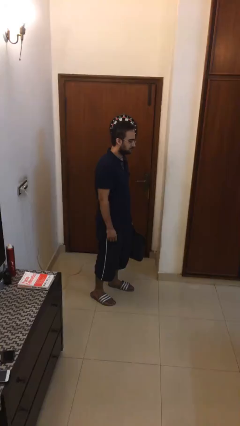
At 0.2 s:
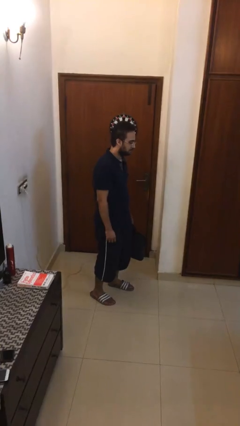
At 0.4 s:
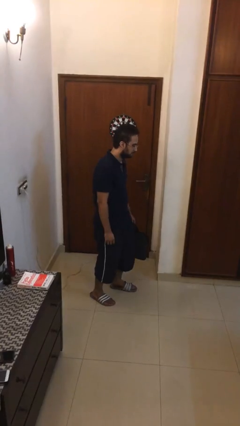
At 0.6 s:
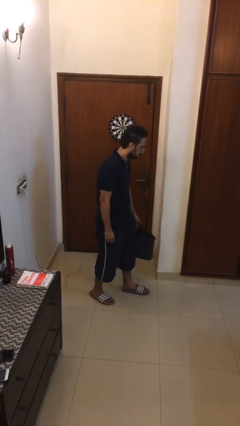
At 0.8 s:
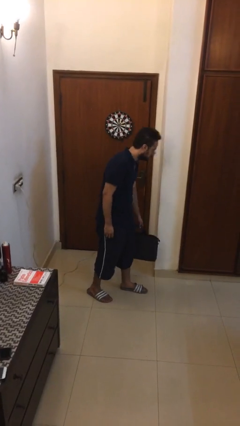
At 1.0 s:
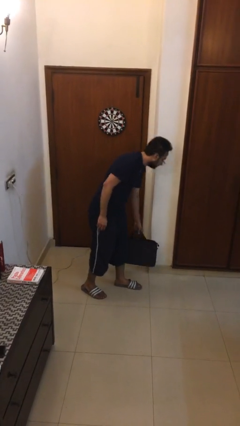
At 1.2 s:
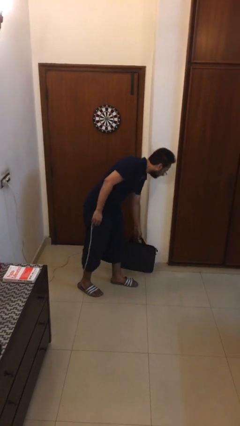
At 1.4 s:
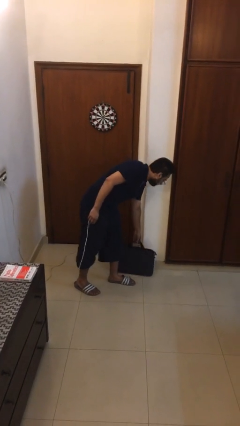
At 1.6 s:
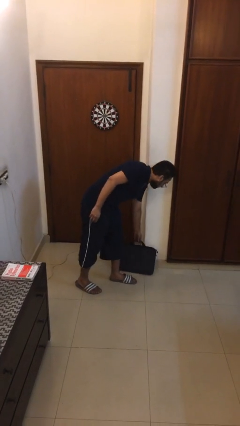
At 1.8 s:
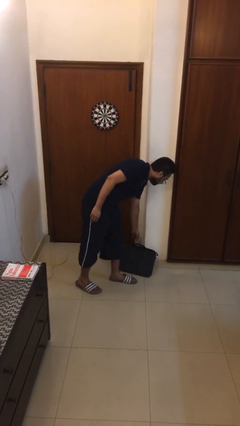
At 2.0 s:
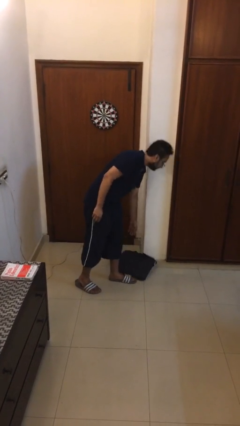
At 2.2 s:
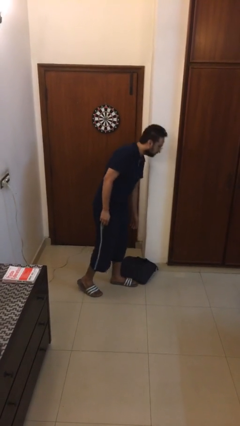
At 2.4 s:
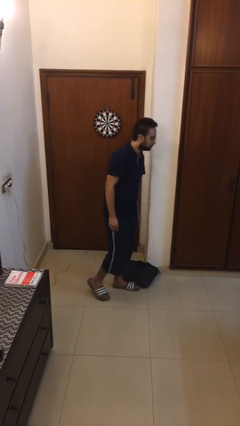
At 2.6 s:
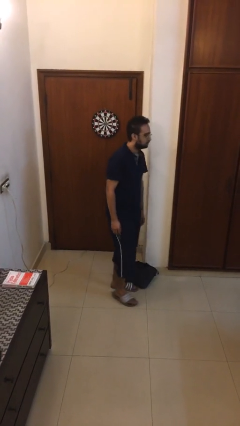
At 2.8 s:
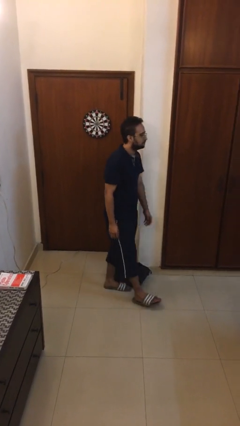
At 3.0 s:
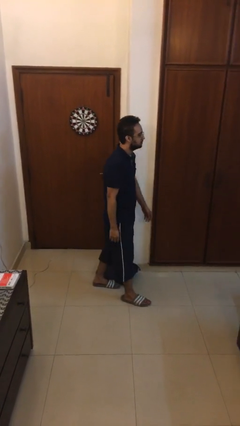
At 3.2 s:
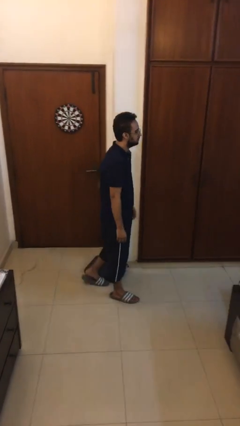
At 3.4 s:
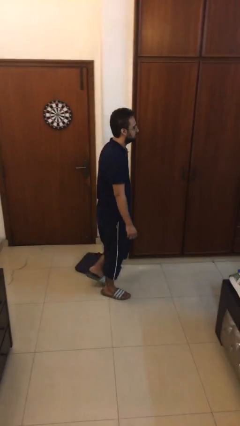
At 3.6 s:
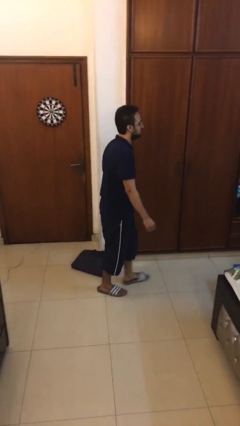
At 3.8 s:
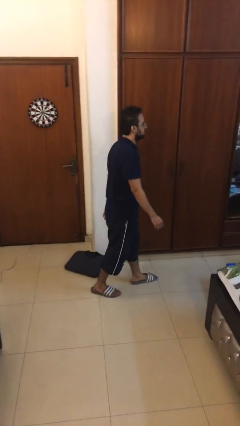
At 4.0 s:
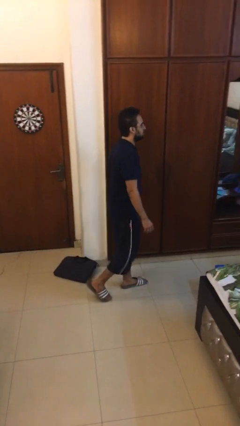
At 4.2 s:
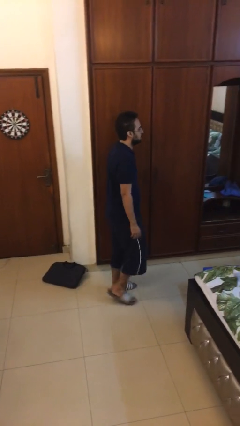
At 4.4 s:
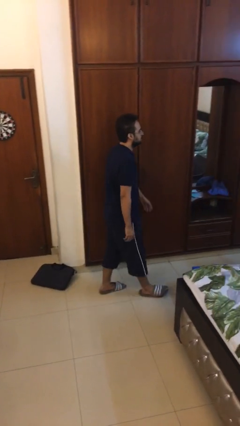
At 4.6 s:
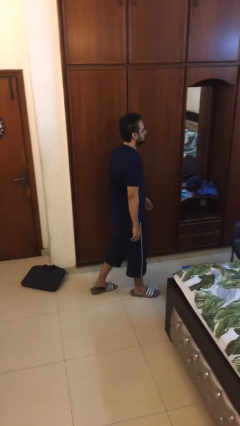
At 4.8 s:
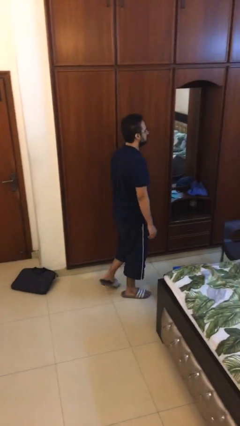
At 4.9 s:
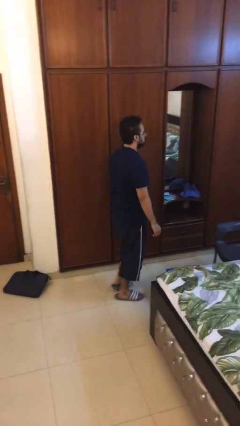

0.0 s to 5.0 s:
person puts down object on floor

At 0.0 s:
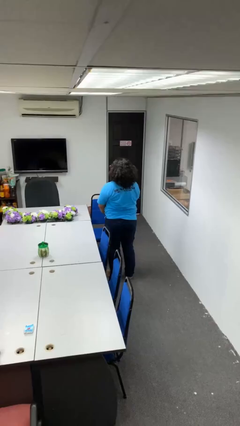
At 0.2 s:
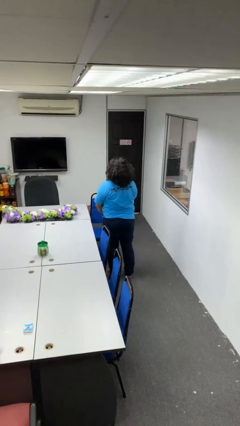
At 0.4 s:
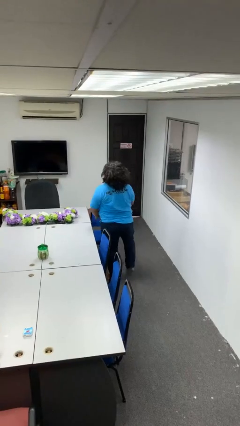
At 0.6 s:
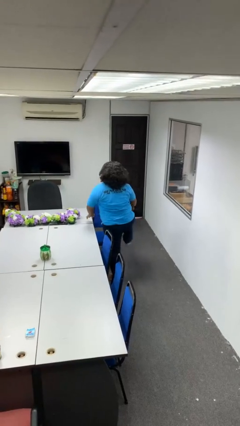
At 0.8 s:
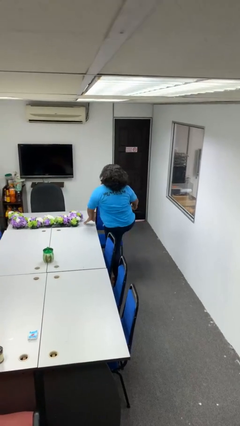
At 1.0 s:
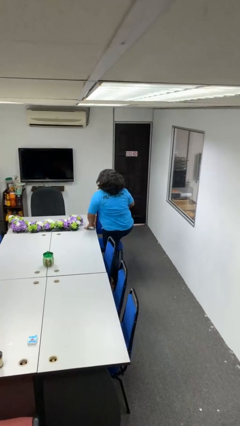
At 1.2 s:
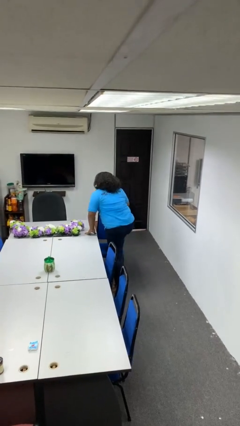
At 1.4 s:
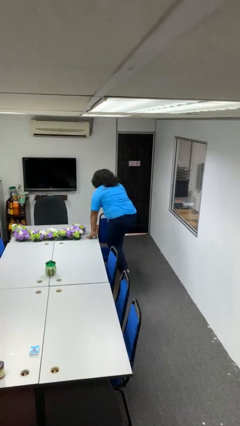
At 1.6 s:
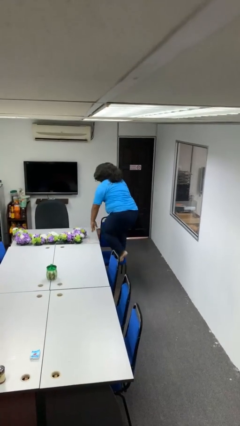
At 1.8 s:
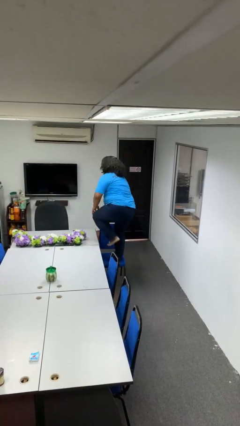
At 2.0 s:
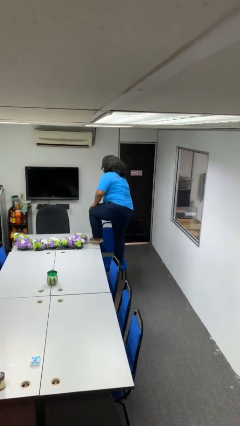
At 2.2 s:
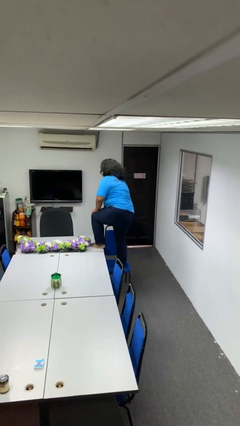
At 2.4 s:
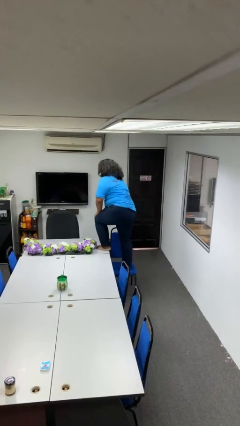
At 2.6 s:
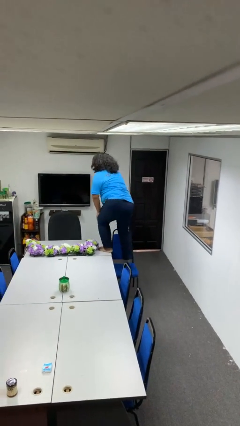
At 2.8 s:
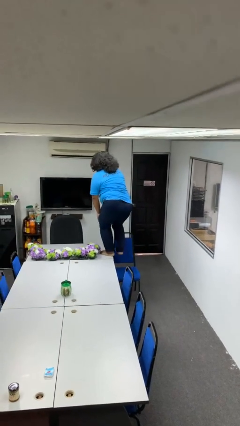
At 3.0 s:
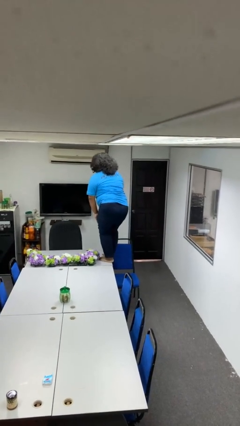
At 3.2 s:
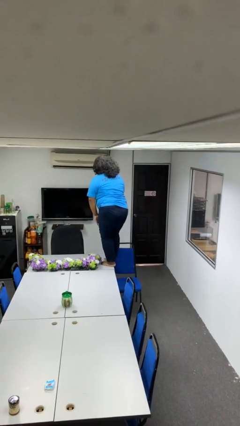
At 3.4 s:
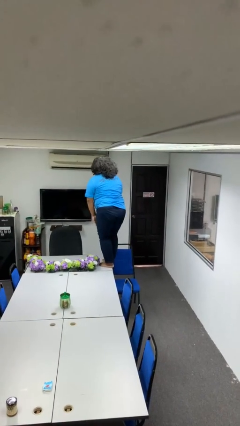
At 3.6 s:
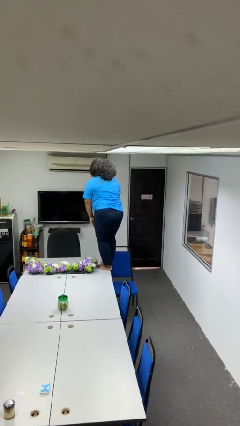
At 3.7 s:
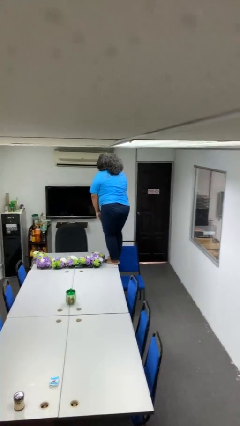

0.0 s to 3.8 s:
person climbs on table

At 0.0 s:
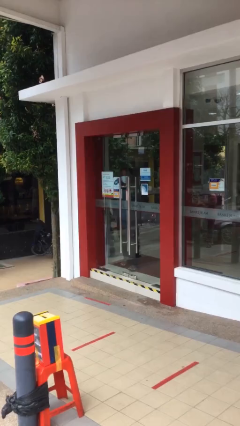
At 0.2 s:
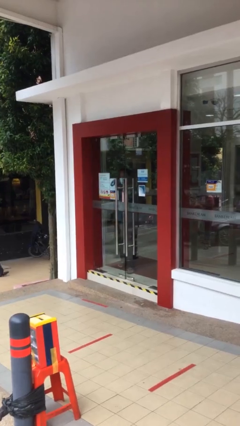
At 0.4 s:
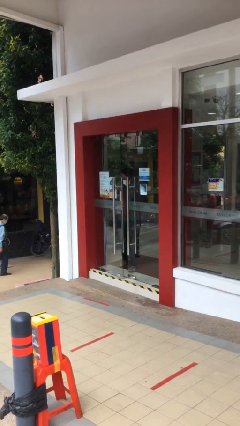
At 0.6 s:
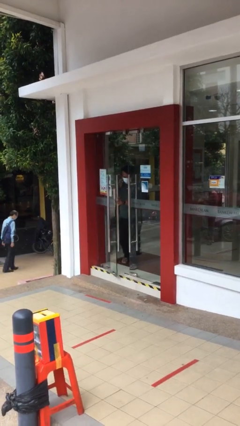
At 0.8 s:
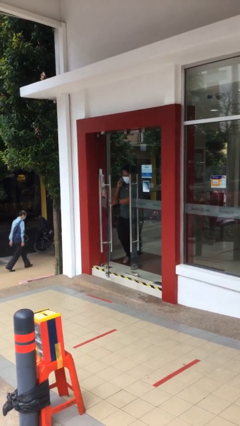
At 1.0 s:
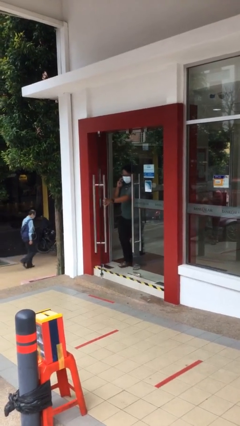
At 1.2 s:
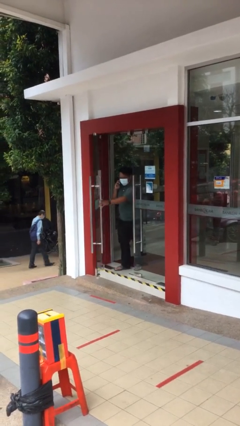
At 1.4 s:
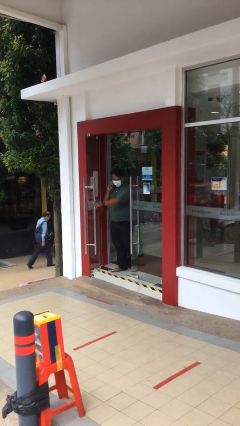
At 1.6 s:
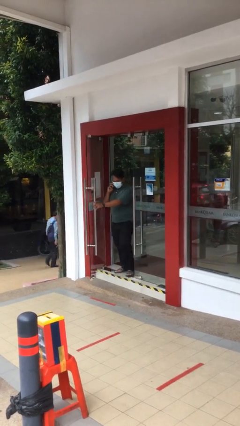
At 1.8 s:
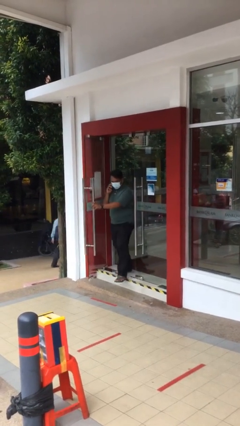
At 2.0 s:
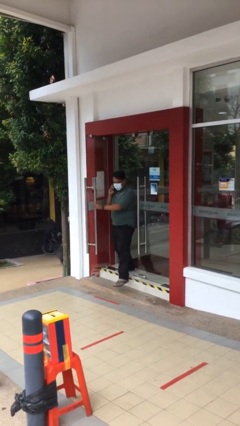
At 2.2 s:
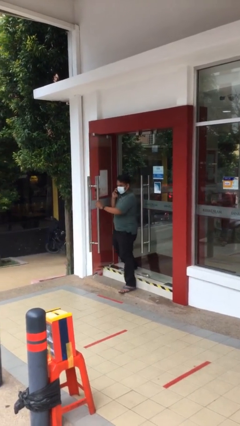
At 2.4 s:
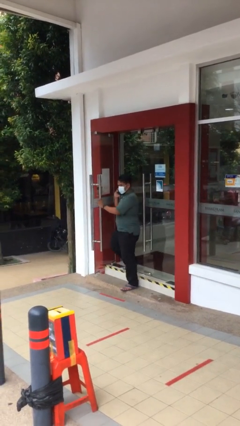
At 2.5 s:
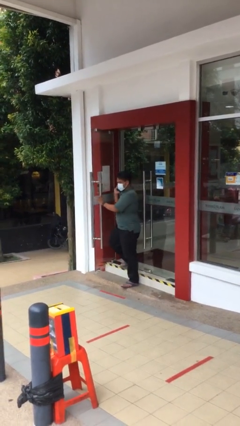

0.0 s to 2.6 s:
person opens facility door

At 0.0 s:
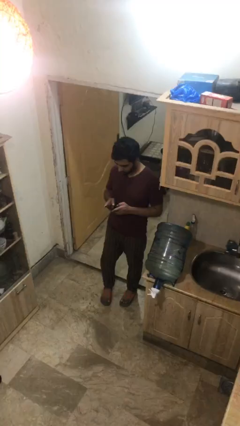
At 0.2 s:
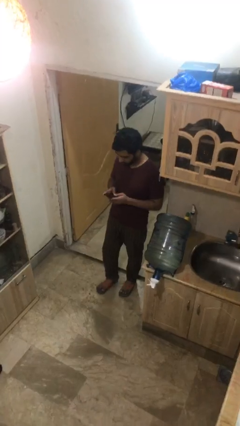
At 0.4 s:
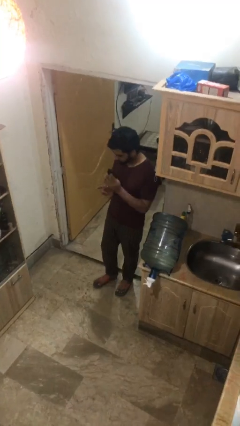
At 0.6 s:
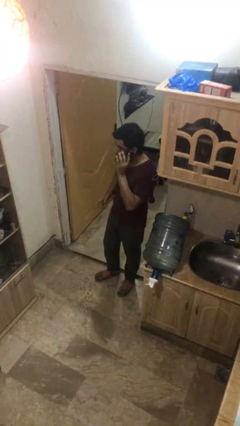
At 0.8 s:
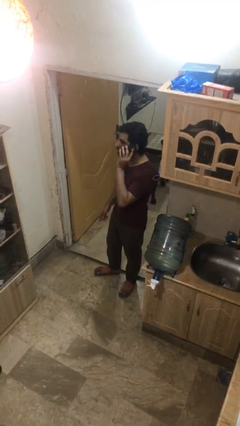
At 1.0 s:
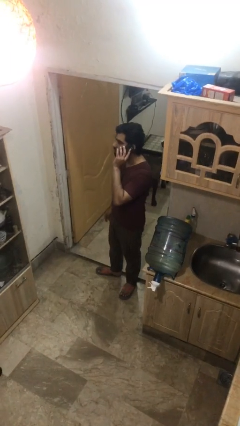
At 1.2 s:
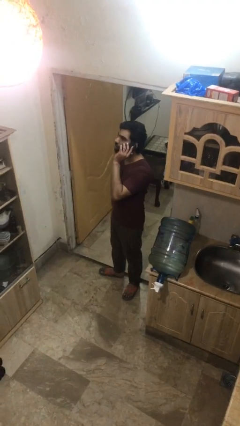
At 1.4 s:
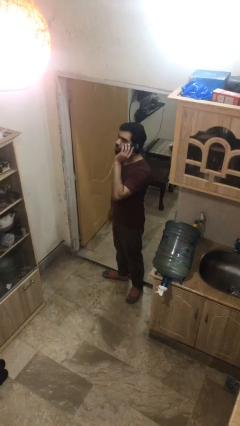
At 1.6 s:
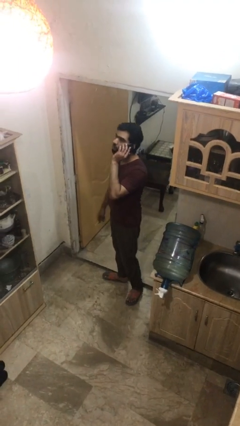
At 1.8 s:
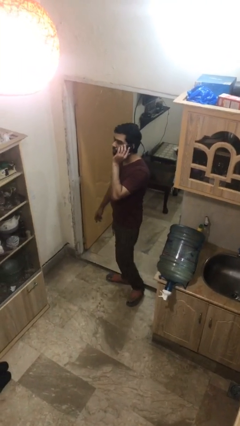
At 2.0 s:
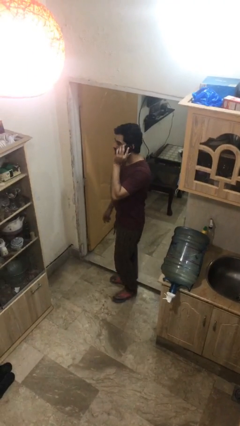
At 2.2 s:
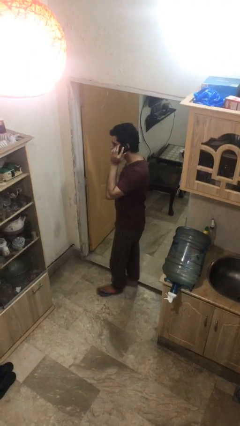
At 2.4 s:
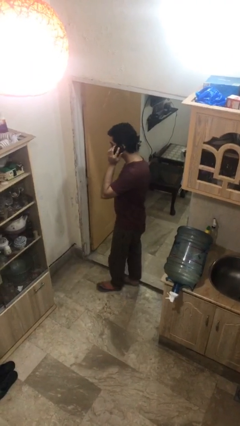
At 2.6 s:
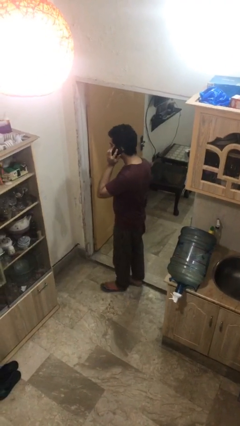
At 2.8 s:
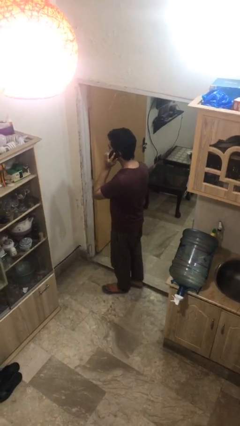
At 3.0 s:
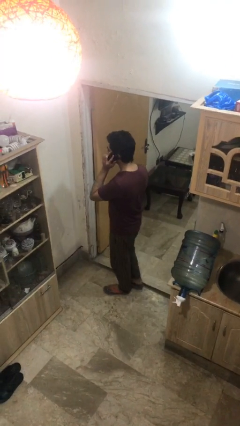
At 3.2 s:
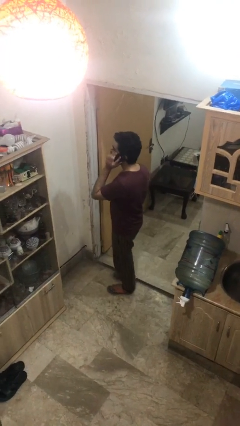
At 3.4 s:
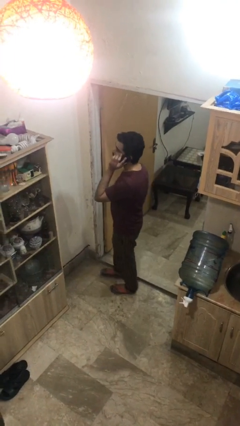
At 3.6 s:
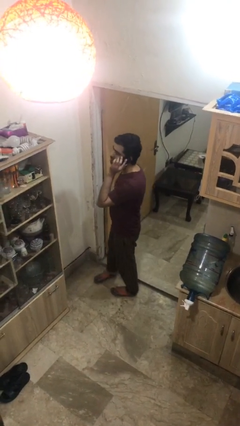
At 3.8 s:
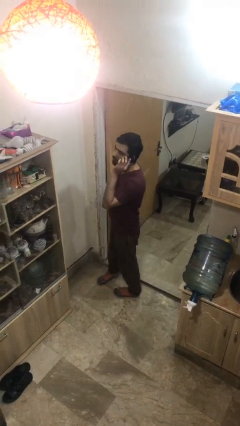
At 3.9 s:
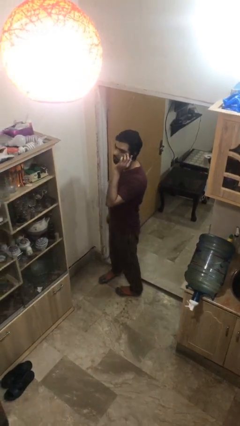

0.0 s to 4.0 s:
person talks on phone

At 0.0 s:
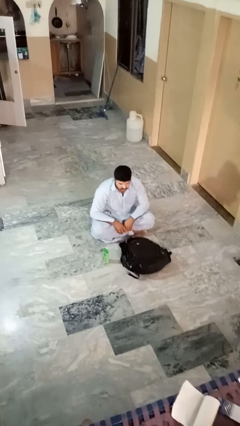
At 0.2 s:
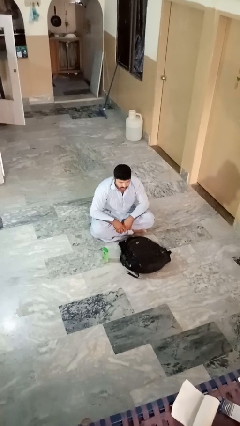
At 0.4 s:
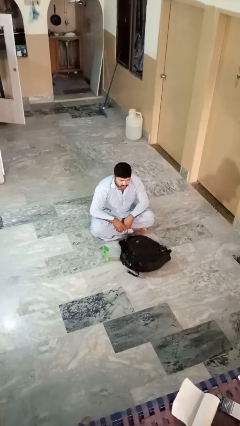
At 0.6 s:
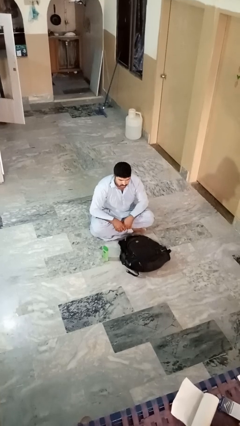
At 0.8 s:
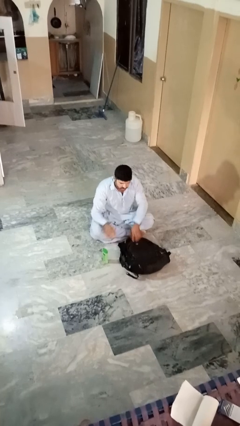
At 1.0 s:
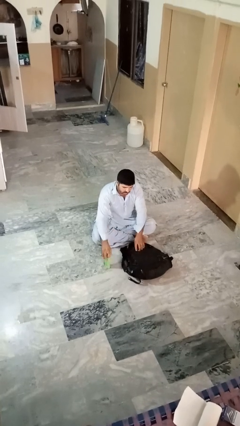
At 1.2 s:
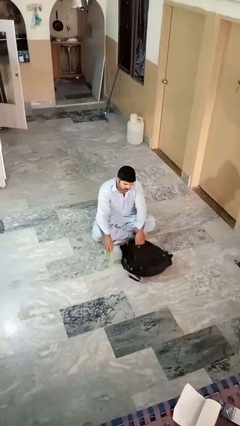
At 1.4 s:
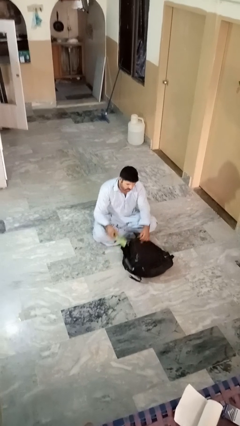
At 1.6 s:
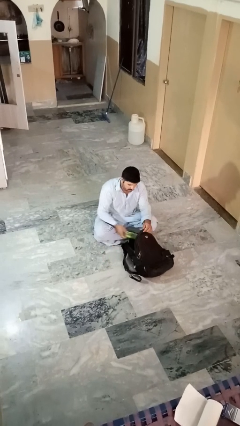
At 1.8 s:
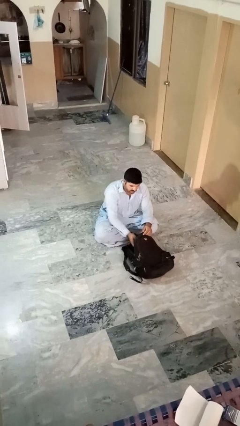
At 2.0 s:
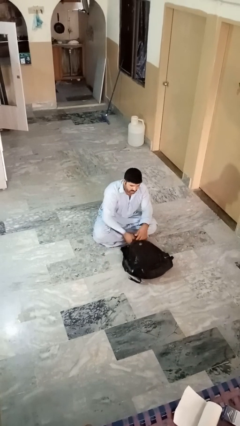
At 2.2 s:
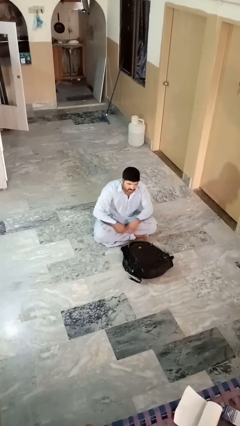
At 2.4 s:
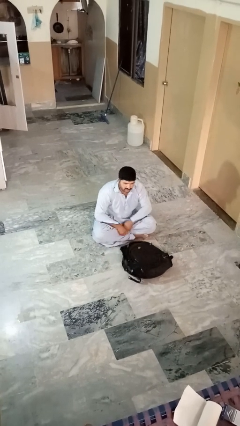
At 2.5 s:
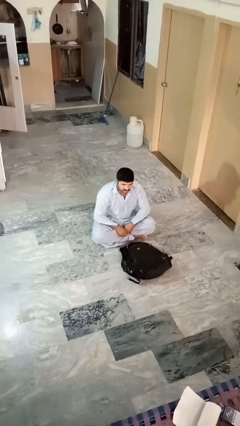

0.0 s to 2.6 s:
person puts object into bag
